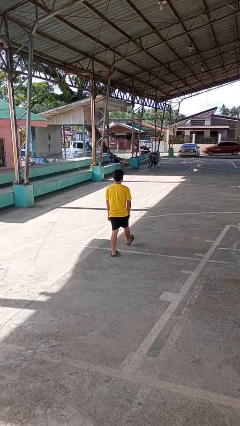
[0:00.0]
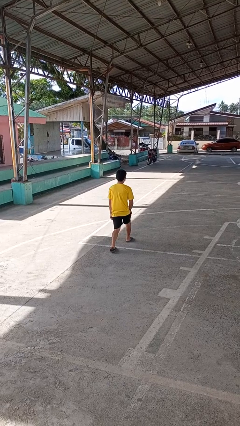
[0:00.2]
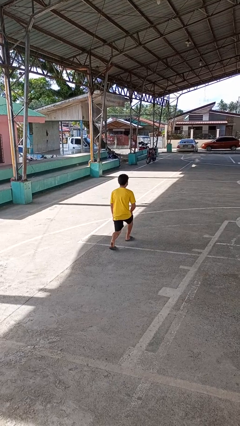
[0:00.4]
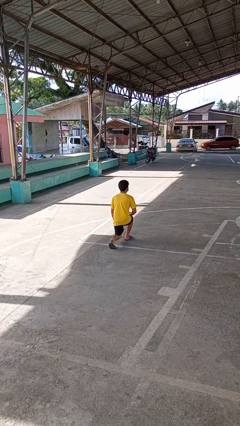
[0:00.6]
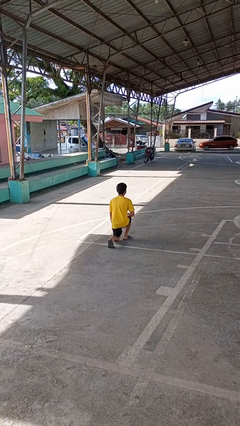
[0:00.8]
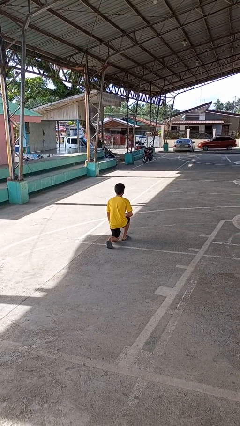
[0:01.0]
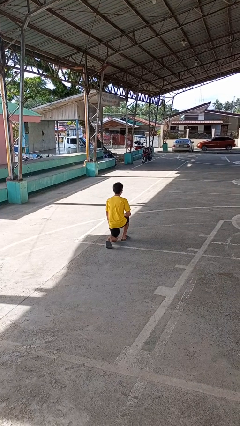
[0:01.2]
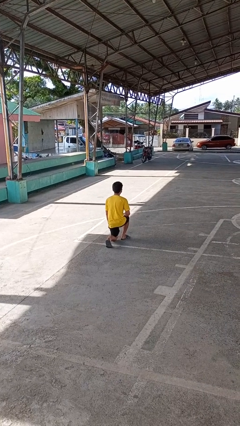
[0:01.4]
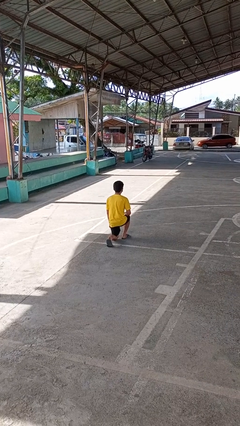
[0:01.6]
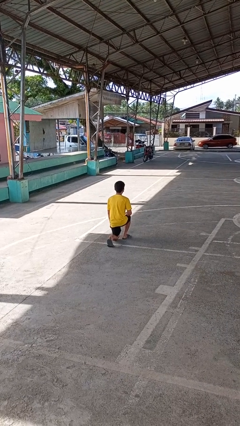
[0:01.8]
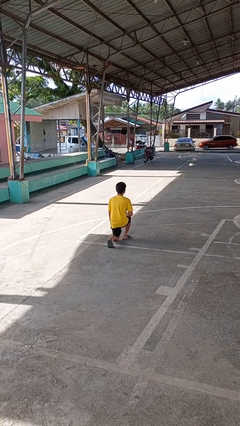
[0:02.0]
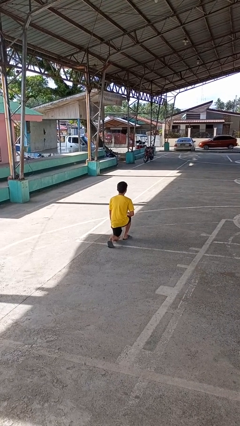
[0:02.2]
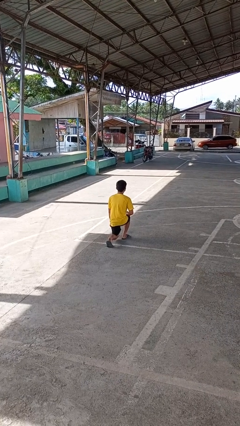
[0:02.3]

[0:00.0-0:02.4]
person kneels

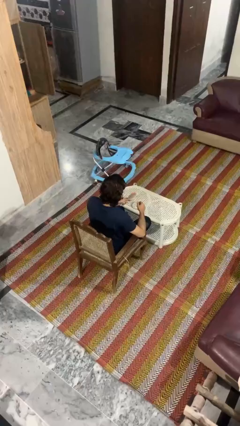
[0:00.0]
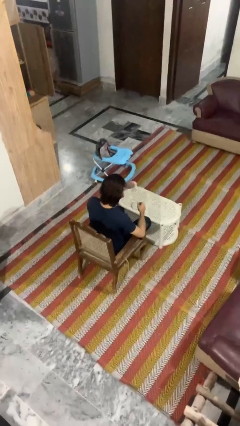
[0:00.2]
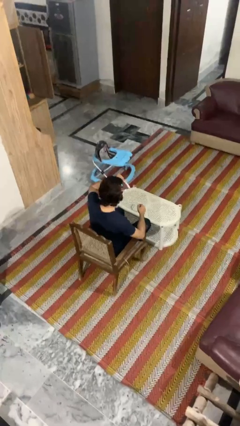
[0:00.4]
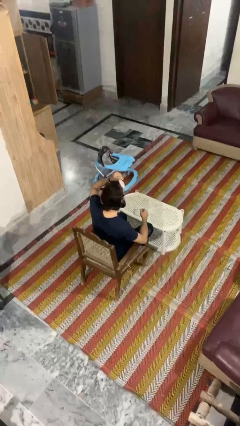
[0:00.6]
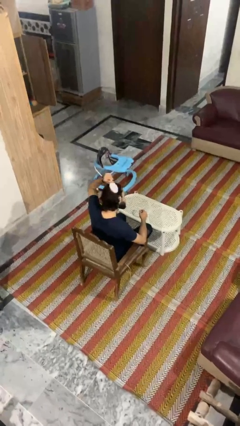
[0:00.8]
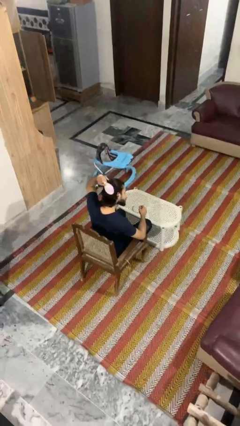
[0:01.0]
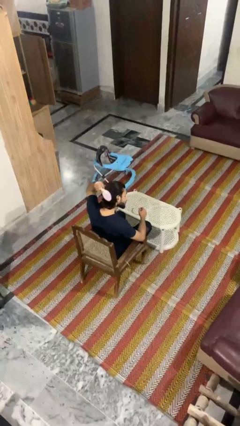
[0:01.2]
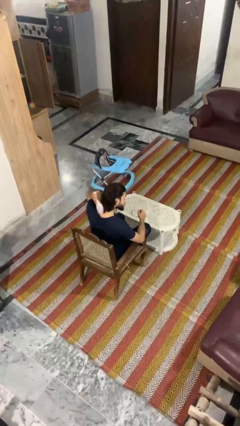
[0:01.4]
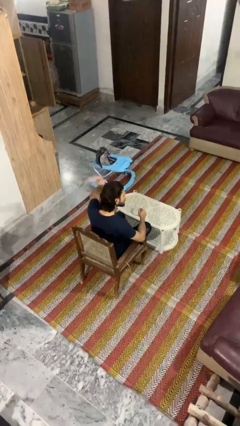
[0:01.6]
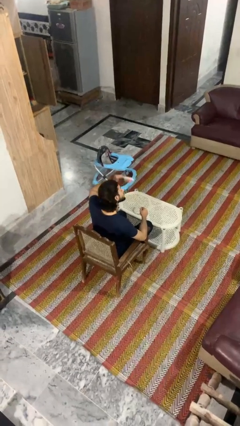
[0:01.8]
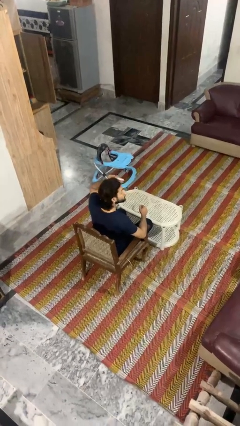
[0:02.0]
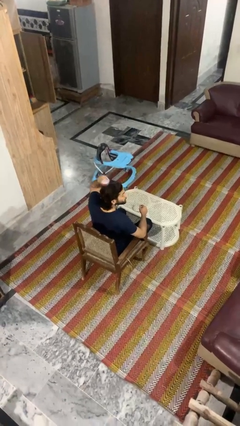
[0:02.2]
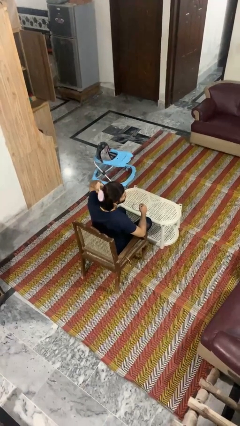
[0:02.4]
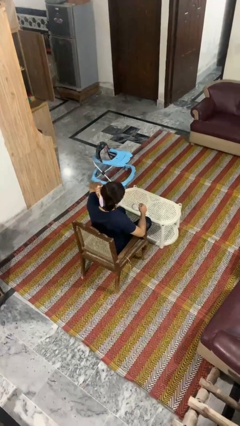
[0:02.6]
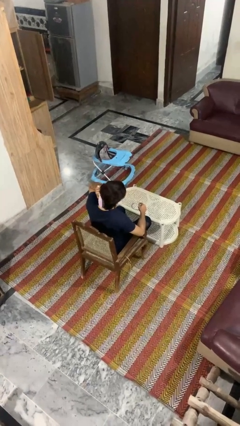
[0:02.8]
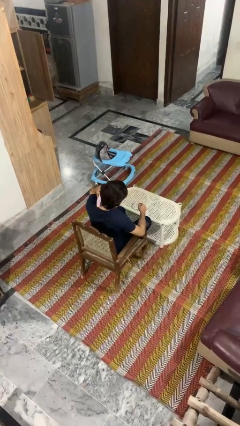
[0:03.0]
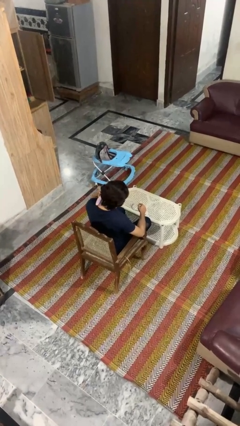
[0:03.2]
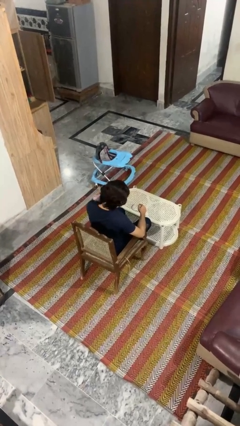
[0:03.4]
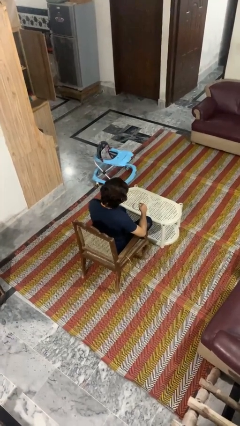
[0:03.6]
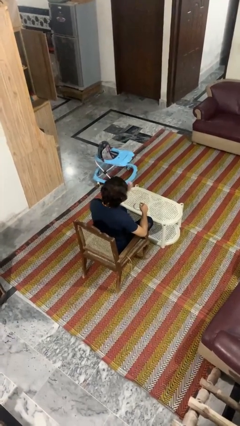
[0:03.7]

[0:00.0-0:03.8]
person brushes hair

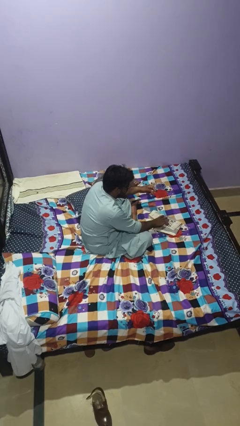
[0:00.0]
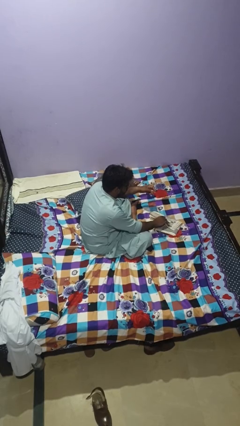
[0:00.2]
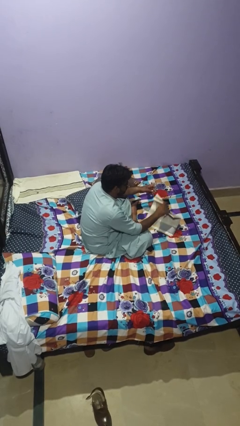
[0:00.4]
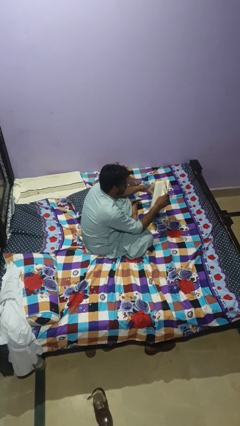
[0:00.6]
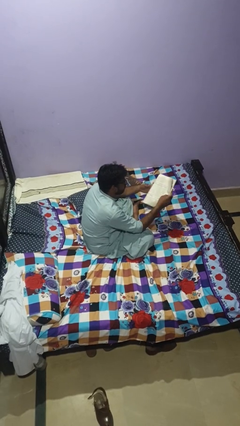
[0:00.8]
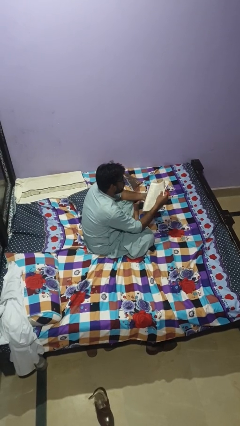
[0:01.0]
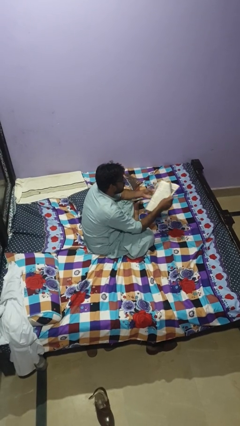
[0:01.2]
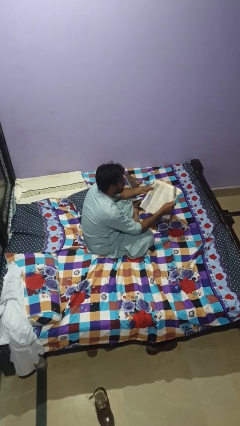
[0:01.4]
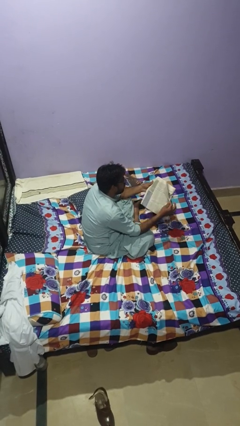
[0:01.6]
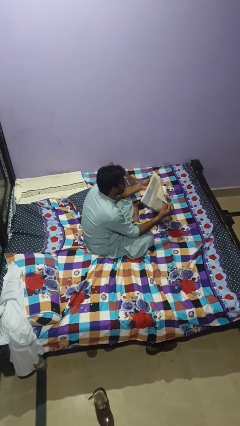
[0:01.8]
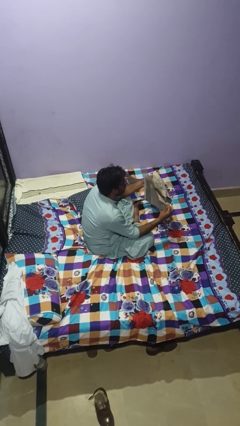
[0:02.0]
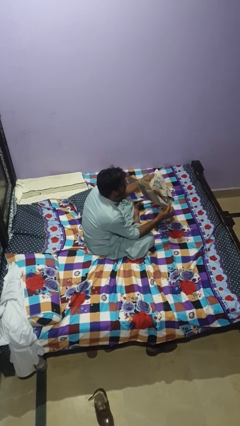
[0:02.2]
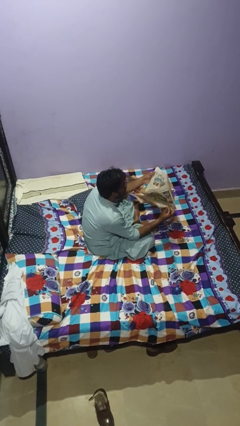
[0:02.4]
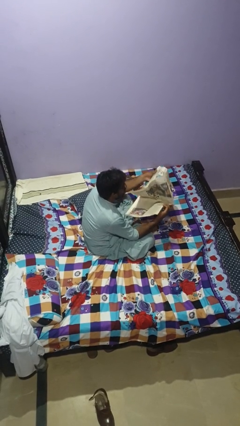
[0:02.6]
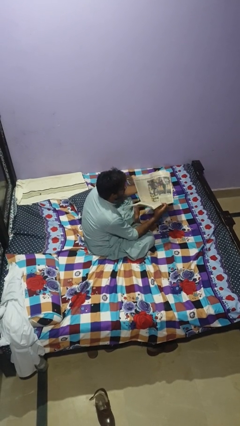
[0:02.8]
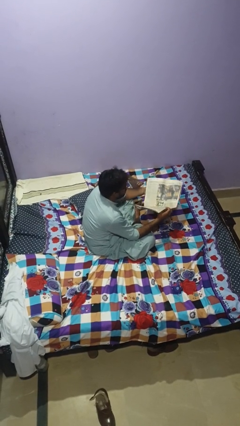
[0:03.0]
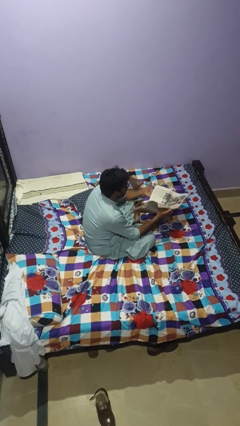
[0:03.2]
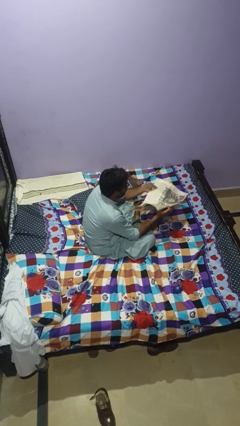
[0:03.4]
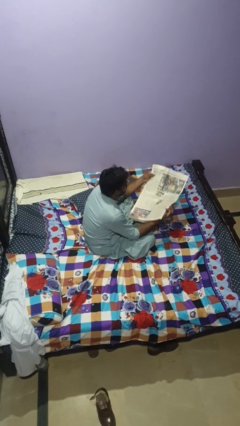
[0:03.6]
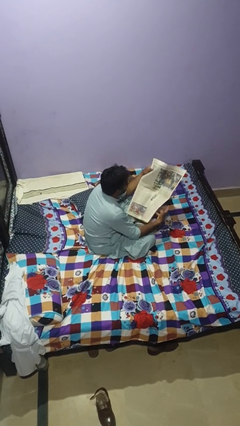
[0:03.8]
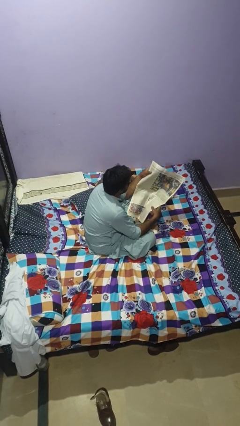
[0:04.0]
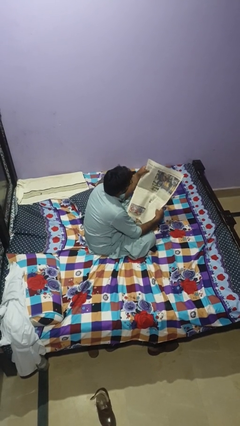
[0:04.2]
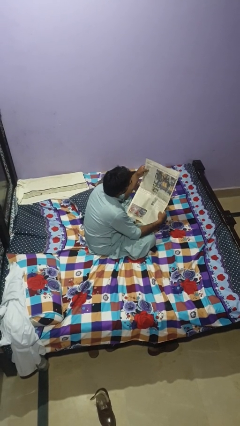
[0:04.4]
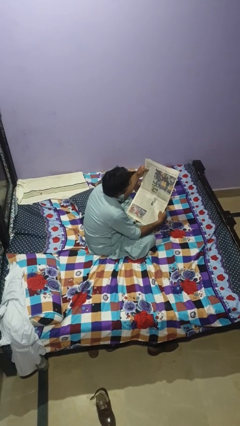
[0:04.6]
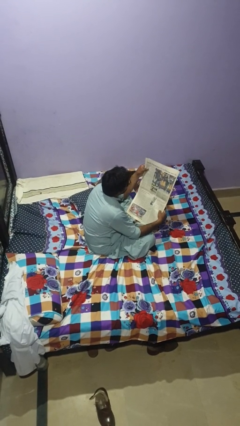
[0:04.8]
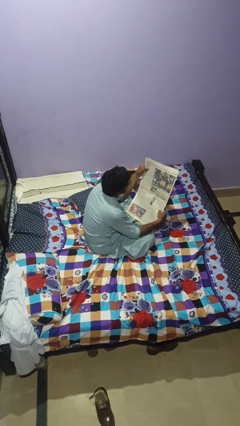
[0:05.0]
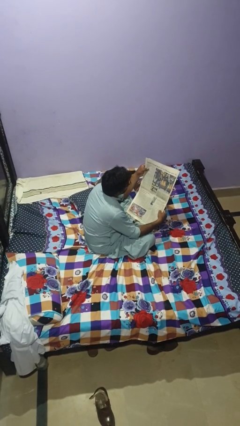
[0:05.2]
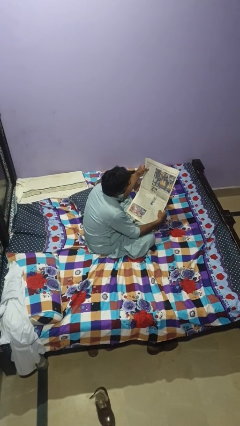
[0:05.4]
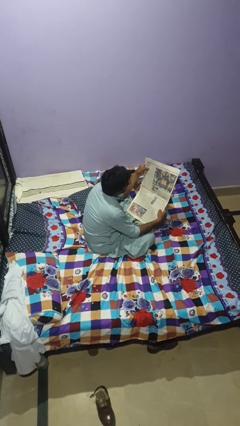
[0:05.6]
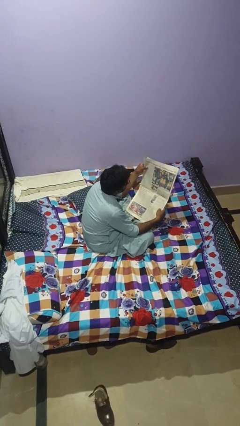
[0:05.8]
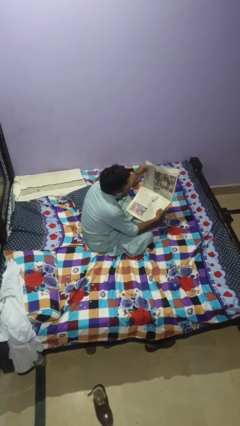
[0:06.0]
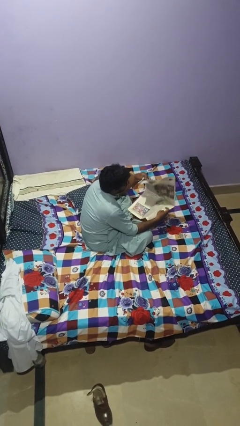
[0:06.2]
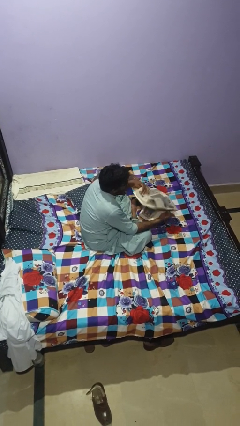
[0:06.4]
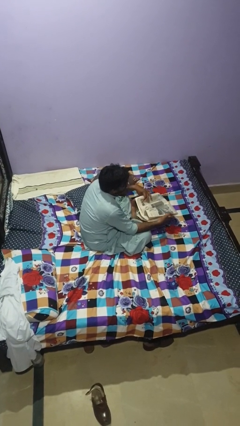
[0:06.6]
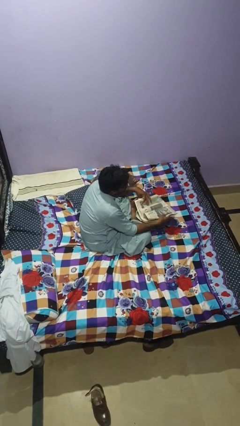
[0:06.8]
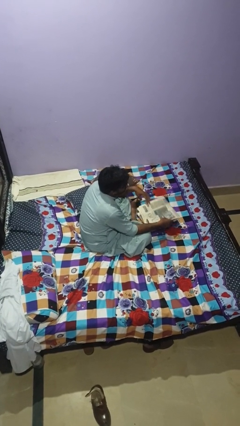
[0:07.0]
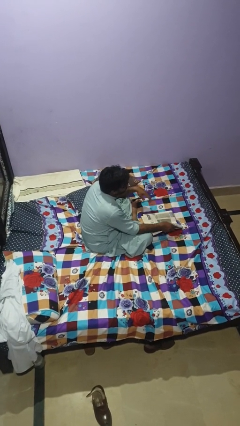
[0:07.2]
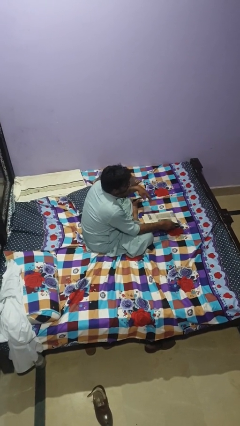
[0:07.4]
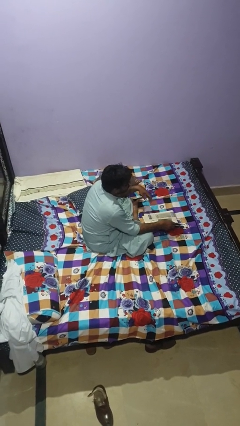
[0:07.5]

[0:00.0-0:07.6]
person reads newspaper

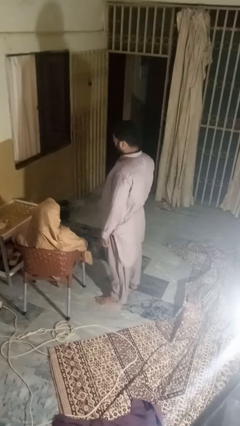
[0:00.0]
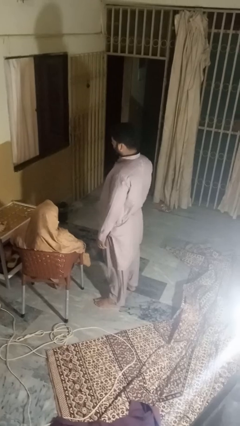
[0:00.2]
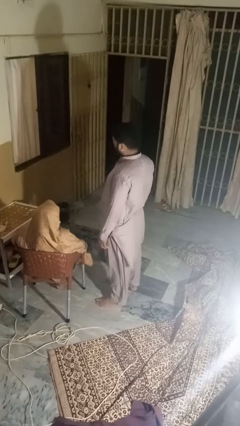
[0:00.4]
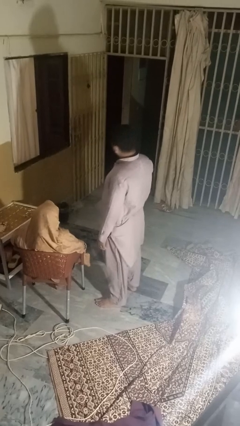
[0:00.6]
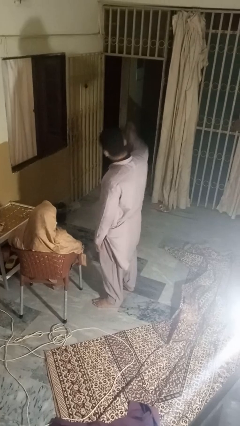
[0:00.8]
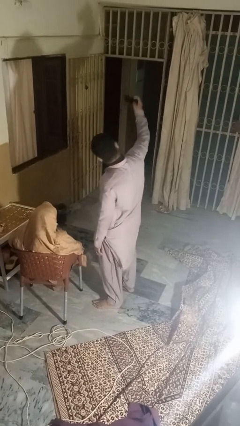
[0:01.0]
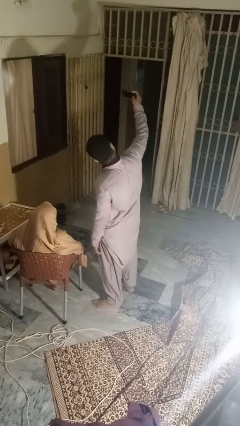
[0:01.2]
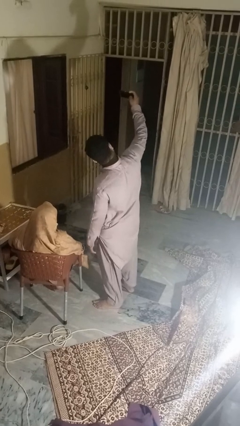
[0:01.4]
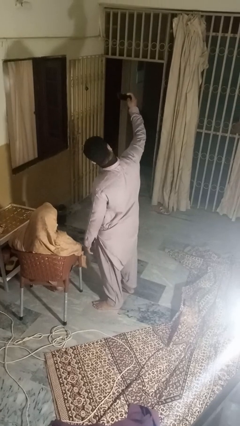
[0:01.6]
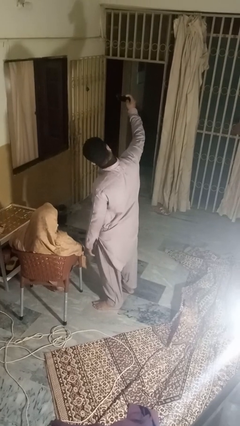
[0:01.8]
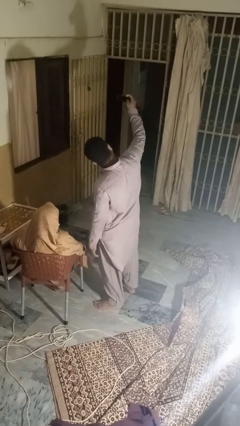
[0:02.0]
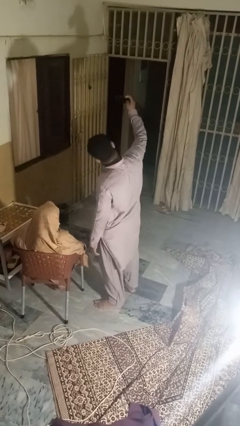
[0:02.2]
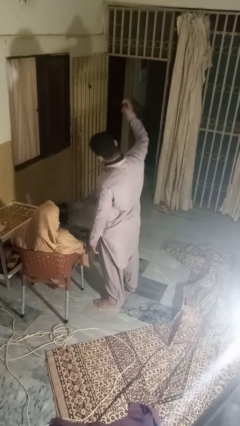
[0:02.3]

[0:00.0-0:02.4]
person takes selfie with person

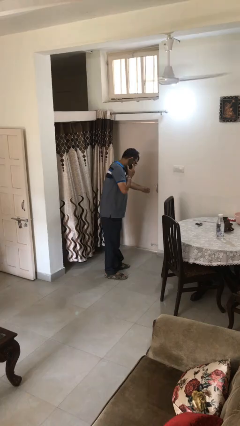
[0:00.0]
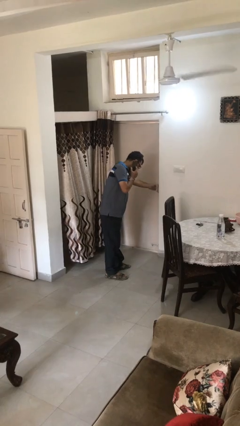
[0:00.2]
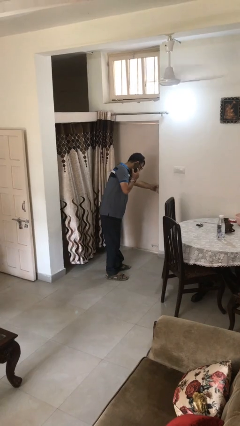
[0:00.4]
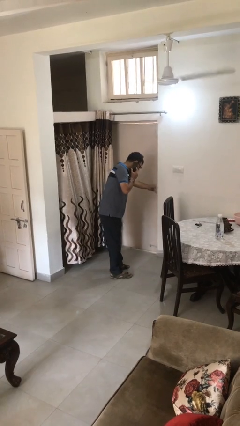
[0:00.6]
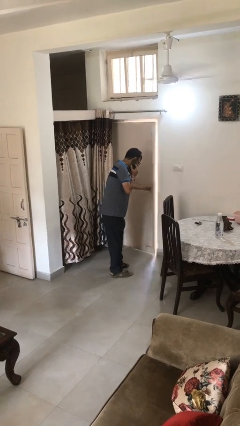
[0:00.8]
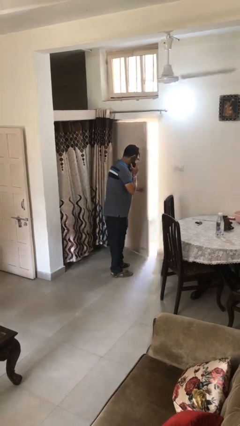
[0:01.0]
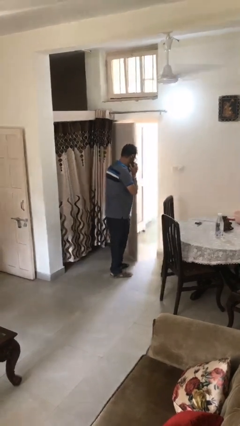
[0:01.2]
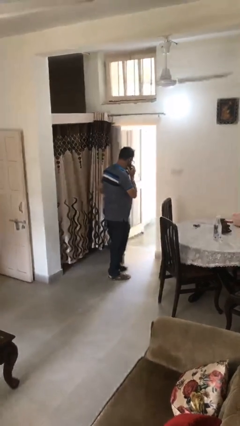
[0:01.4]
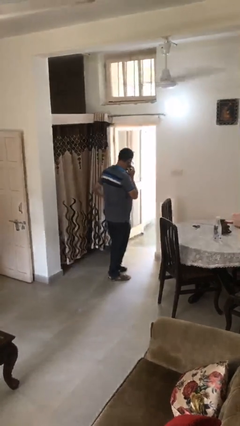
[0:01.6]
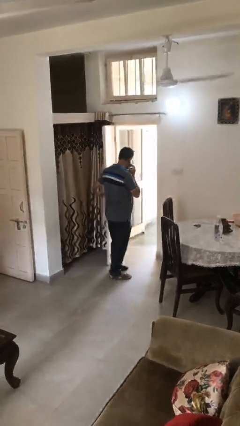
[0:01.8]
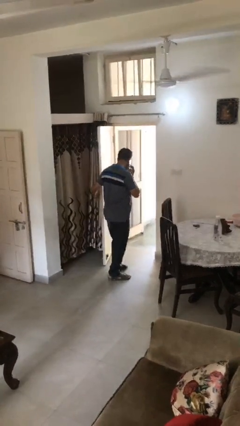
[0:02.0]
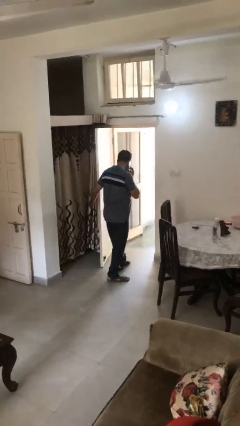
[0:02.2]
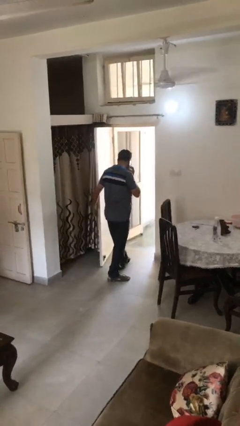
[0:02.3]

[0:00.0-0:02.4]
person opens facility door
